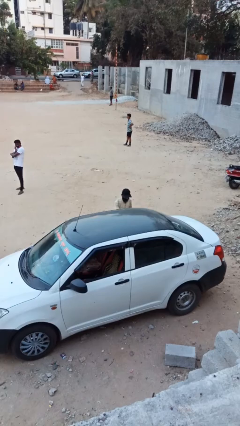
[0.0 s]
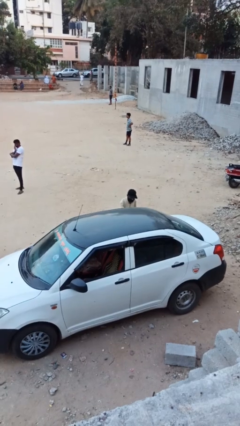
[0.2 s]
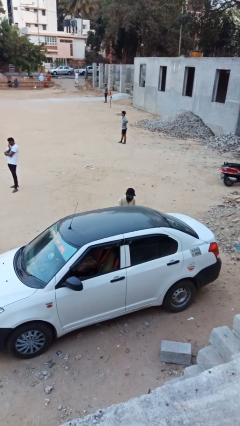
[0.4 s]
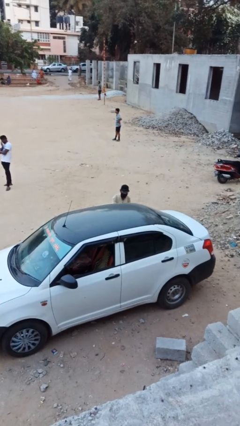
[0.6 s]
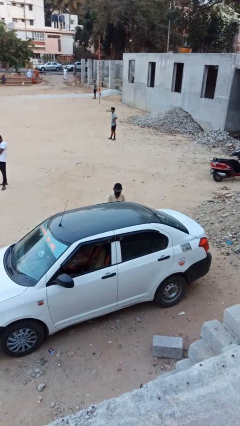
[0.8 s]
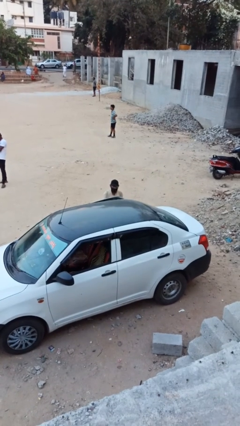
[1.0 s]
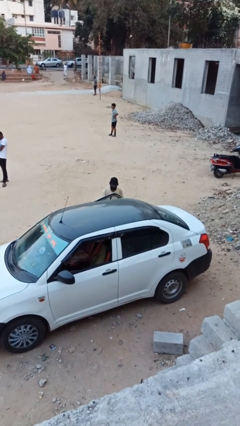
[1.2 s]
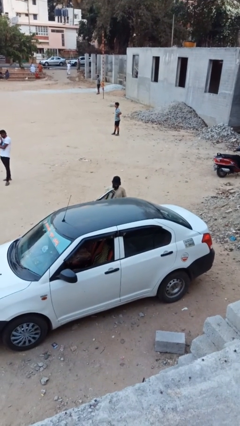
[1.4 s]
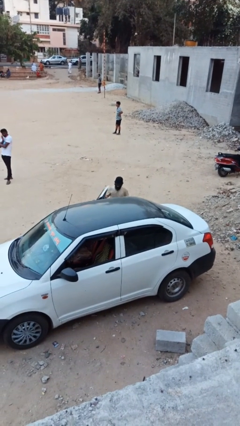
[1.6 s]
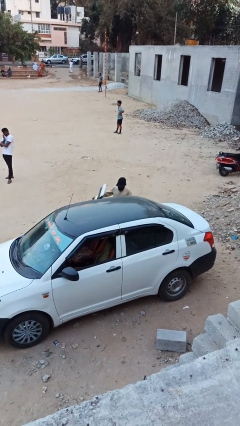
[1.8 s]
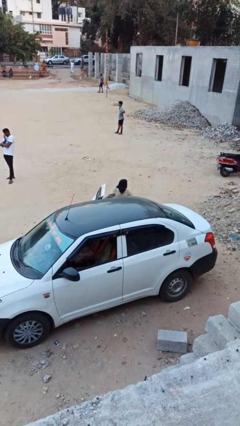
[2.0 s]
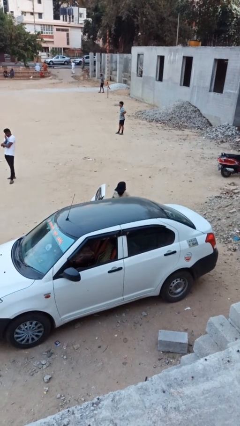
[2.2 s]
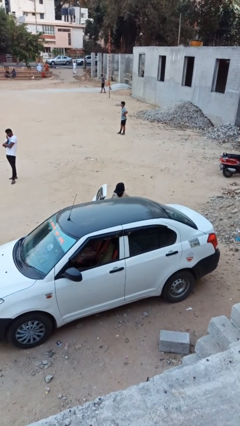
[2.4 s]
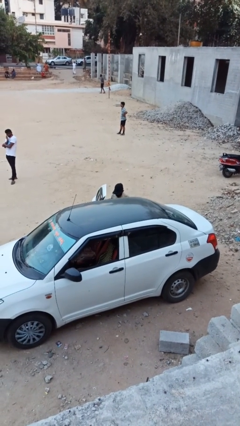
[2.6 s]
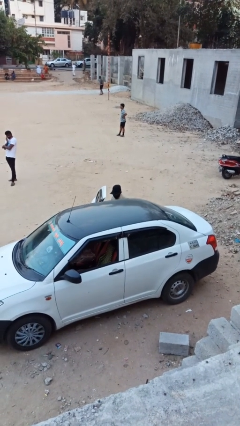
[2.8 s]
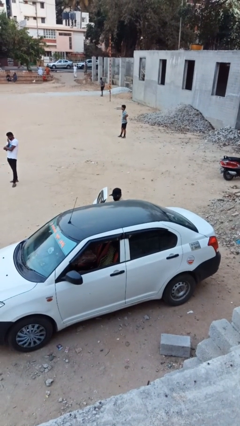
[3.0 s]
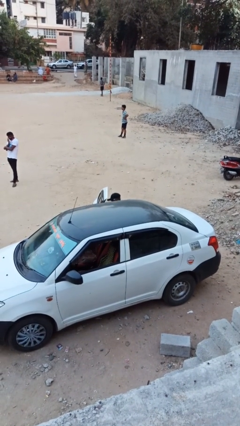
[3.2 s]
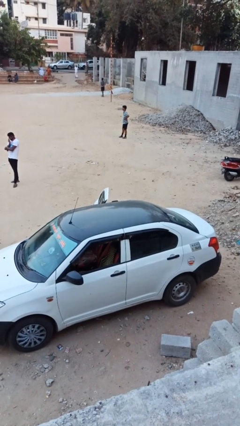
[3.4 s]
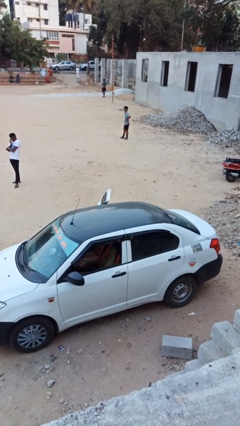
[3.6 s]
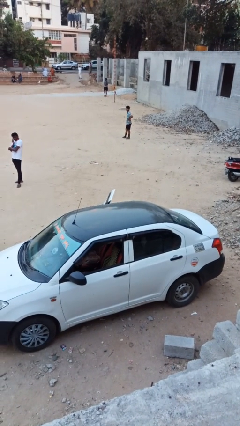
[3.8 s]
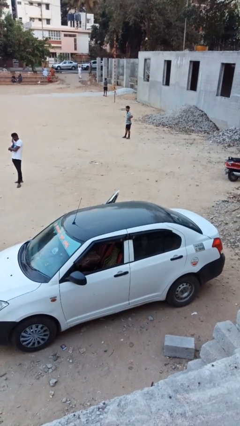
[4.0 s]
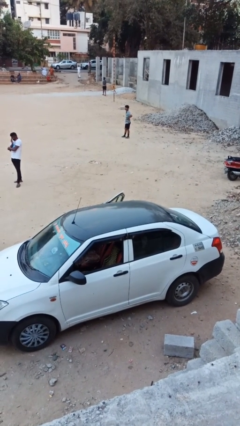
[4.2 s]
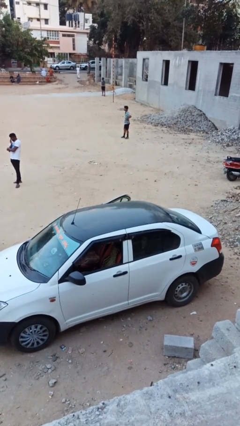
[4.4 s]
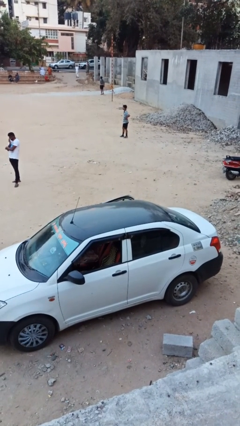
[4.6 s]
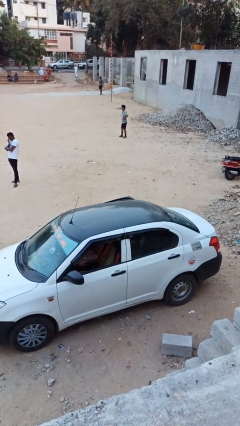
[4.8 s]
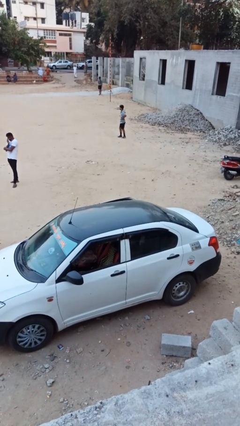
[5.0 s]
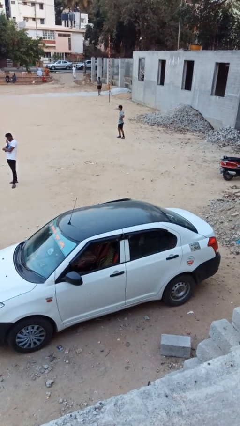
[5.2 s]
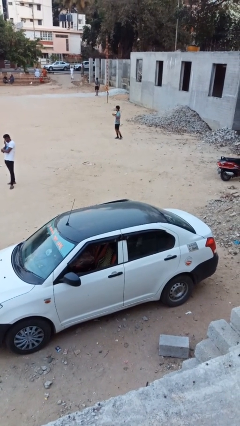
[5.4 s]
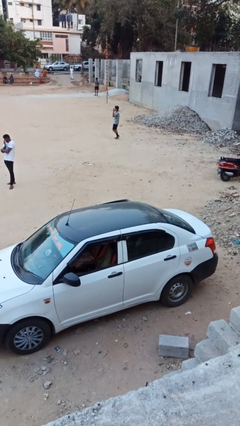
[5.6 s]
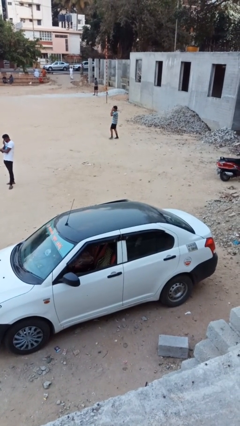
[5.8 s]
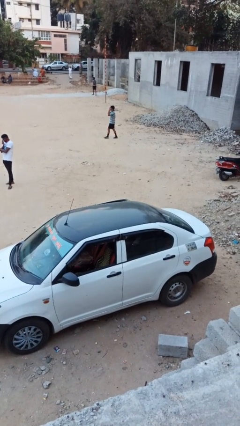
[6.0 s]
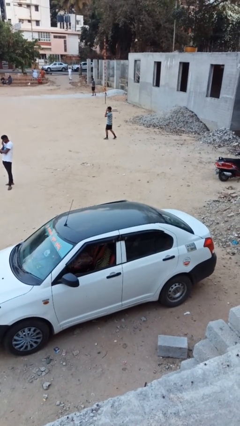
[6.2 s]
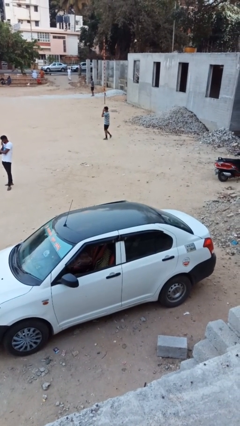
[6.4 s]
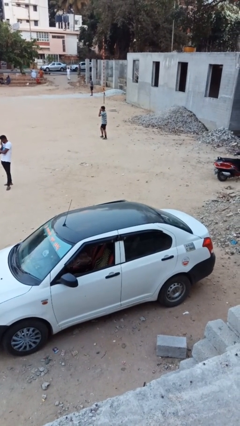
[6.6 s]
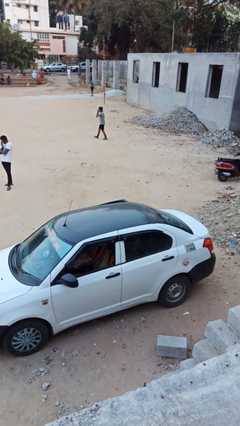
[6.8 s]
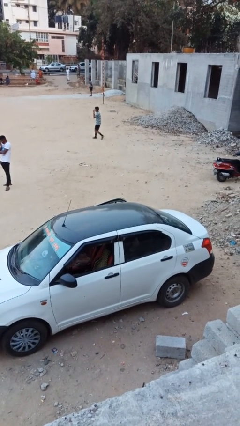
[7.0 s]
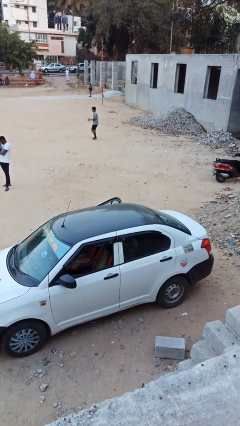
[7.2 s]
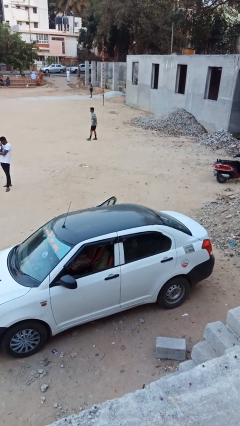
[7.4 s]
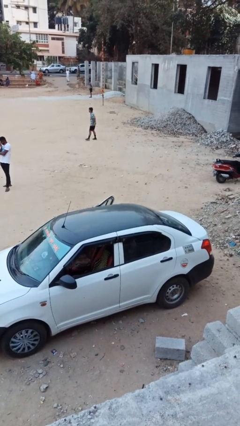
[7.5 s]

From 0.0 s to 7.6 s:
person enters car

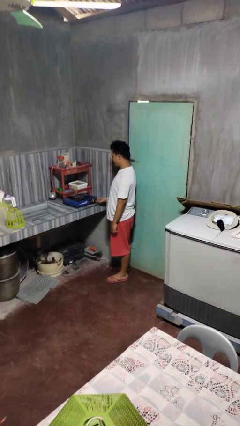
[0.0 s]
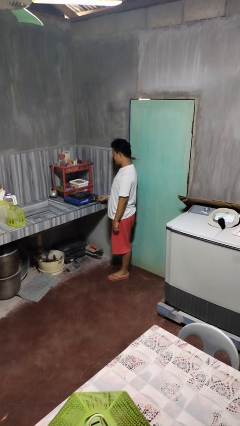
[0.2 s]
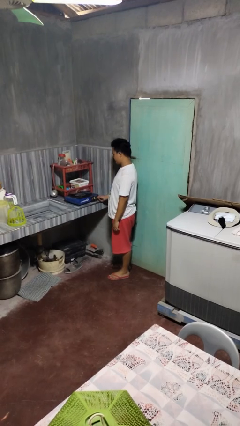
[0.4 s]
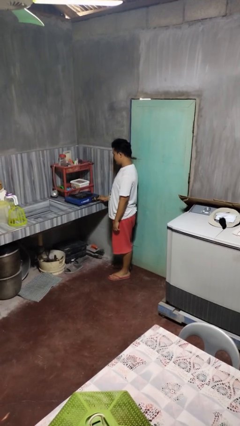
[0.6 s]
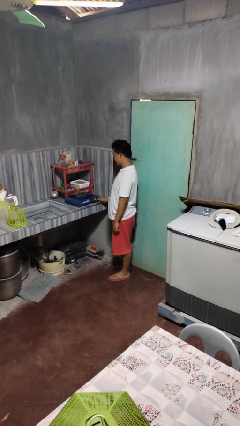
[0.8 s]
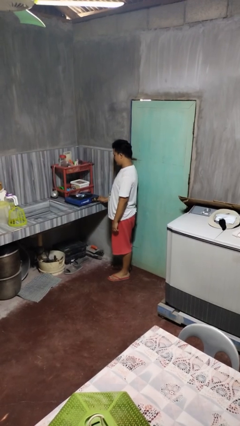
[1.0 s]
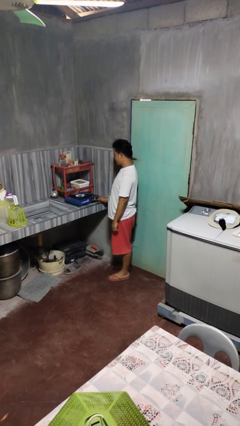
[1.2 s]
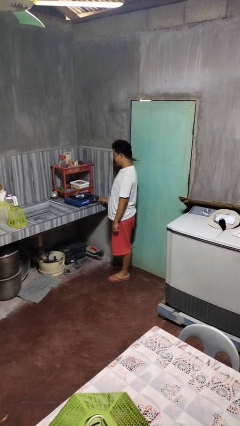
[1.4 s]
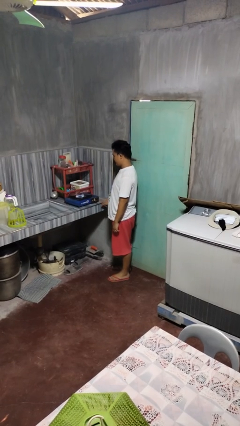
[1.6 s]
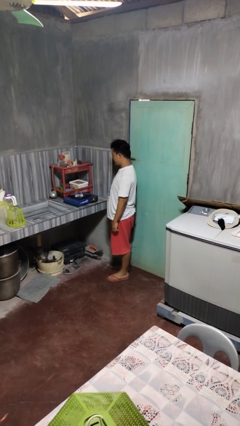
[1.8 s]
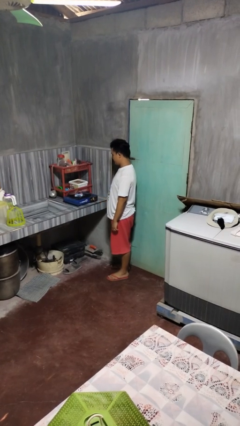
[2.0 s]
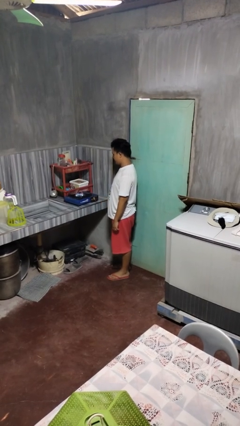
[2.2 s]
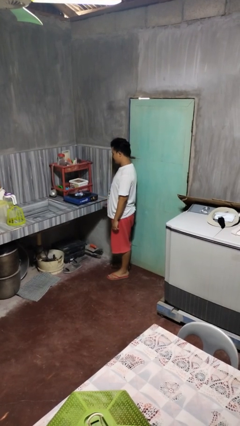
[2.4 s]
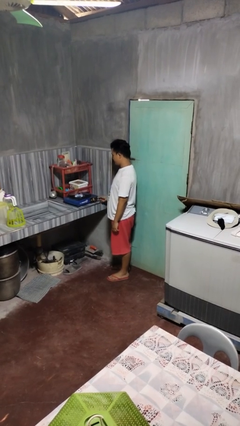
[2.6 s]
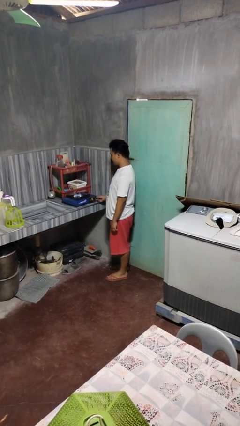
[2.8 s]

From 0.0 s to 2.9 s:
person turns on stovetop

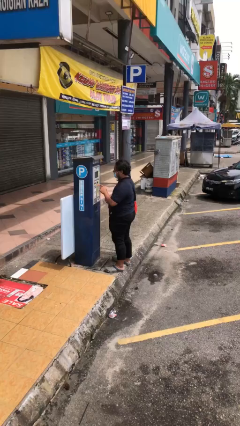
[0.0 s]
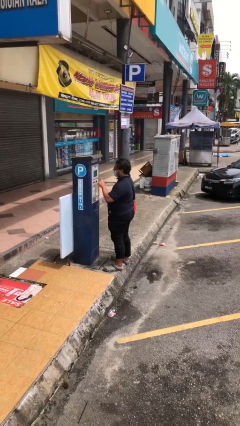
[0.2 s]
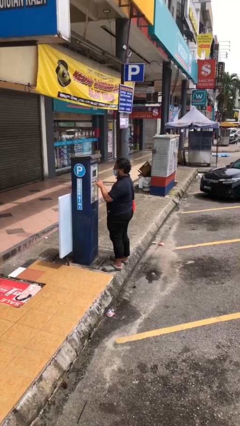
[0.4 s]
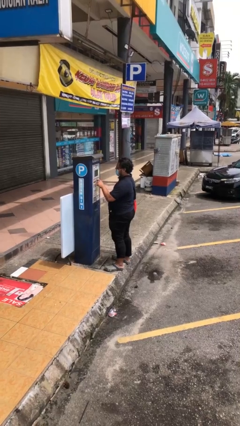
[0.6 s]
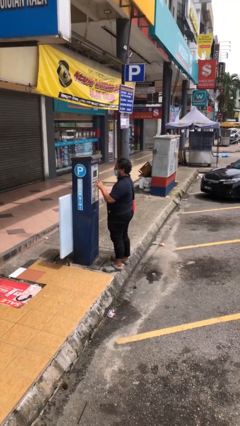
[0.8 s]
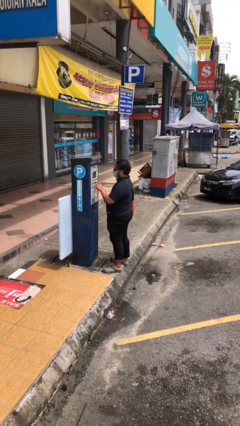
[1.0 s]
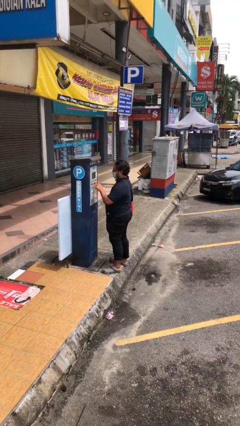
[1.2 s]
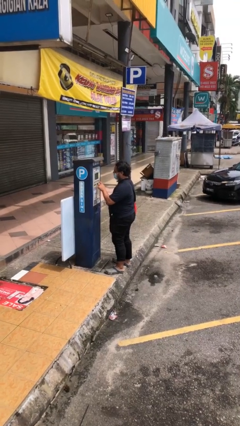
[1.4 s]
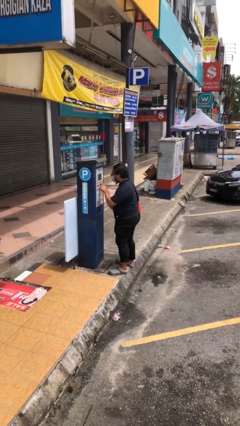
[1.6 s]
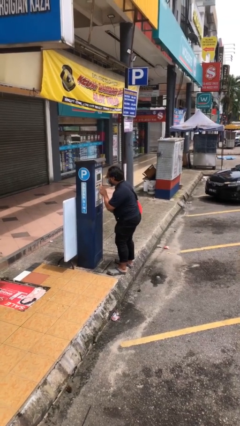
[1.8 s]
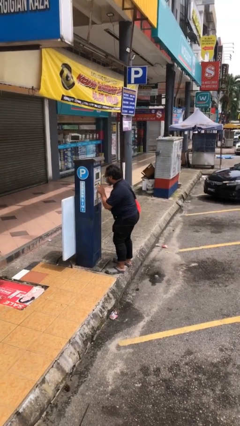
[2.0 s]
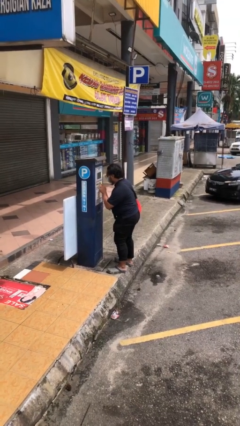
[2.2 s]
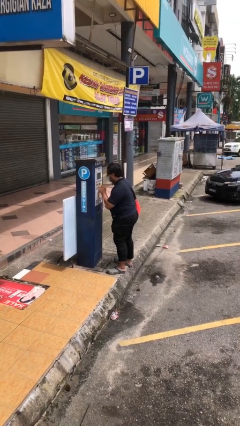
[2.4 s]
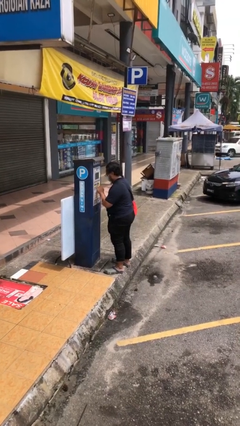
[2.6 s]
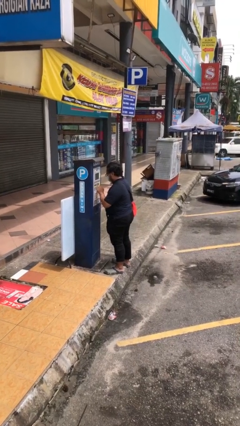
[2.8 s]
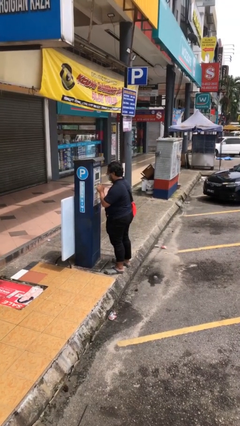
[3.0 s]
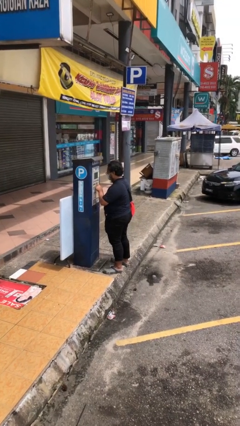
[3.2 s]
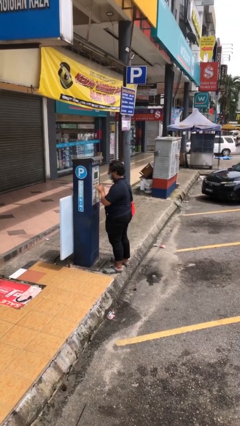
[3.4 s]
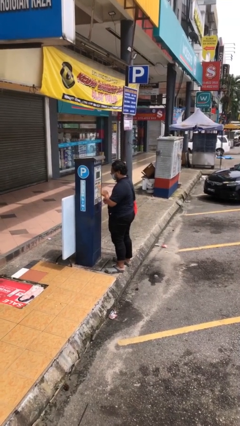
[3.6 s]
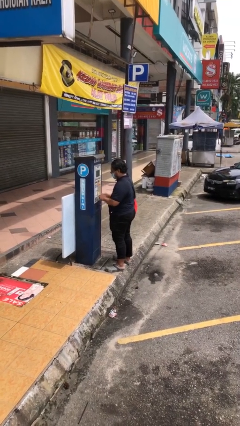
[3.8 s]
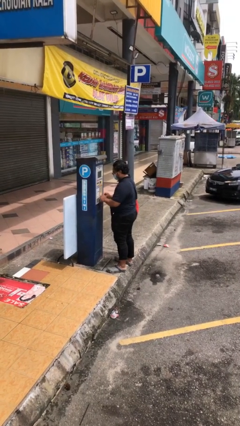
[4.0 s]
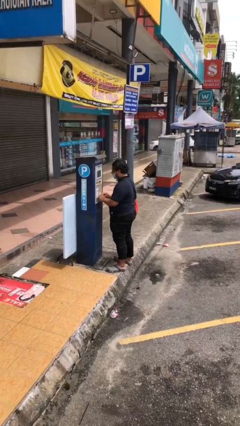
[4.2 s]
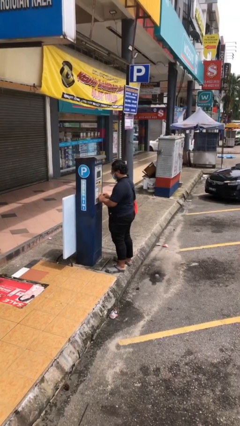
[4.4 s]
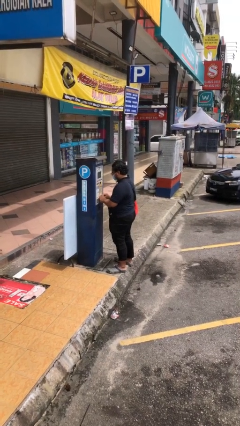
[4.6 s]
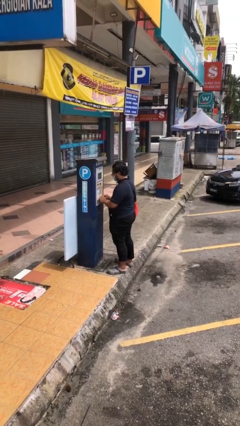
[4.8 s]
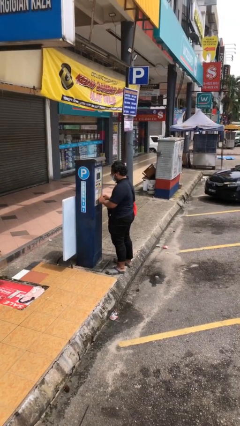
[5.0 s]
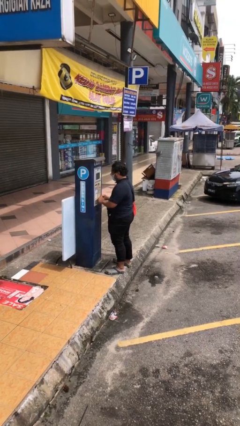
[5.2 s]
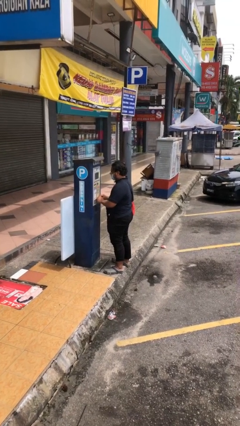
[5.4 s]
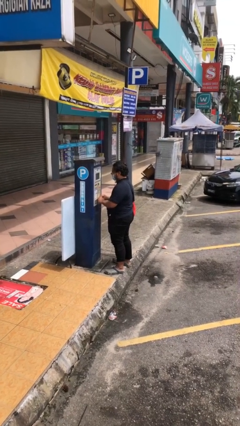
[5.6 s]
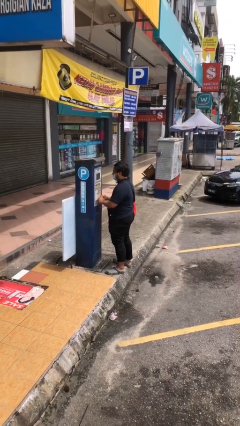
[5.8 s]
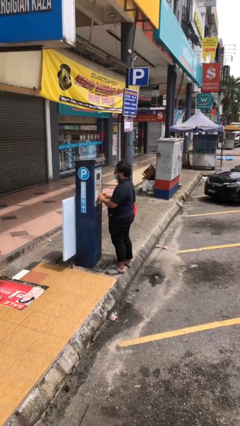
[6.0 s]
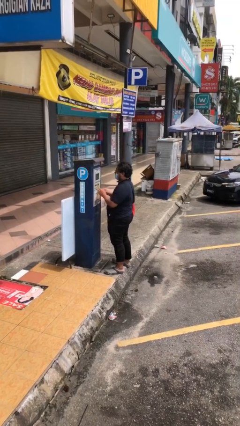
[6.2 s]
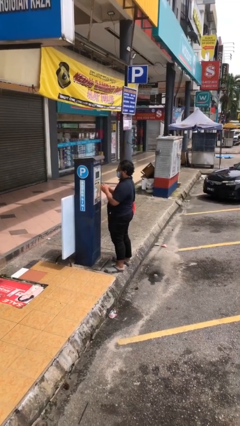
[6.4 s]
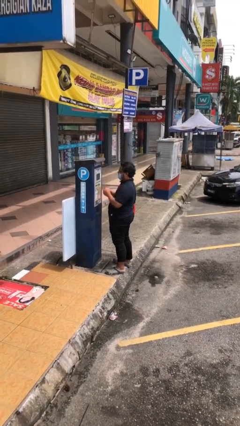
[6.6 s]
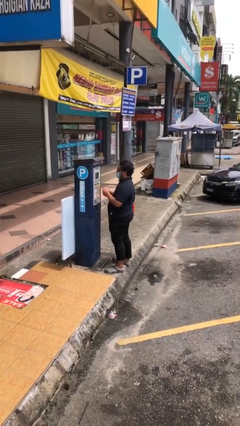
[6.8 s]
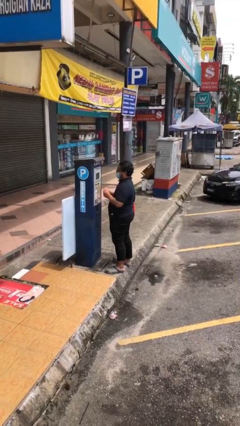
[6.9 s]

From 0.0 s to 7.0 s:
person purchases from machine

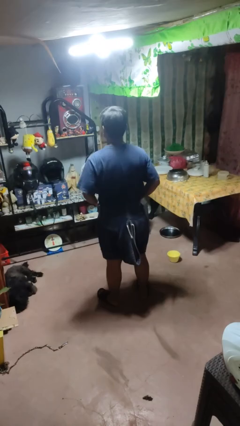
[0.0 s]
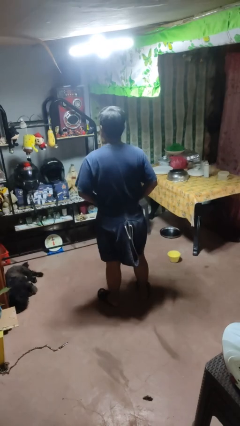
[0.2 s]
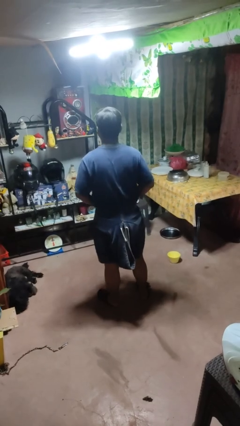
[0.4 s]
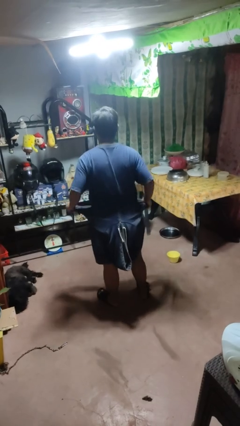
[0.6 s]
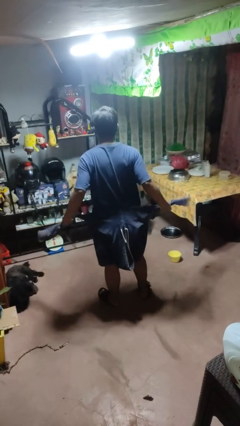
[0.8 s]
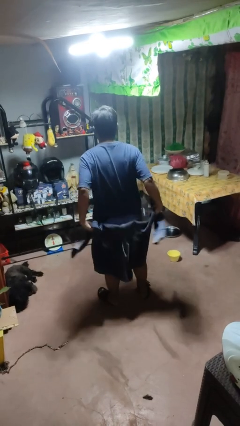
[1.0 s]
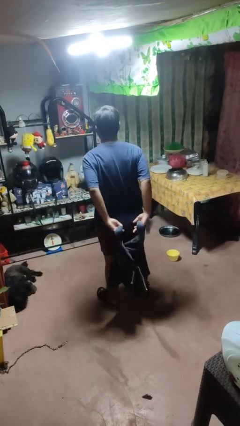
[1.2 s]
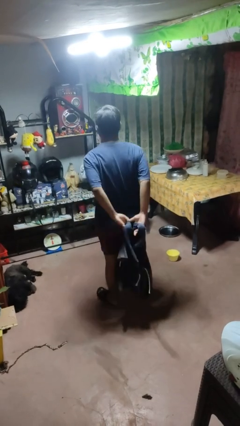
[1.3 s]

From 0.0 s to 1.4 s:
person unties jacket around waist
